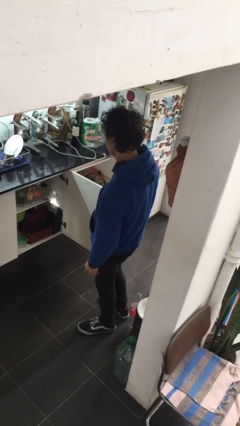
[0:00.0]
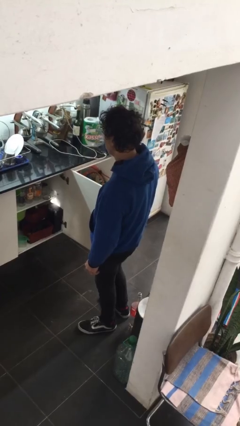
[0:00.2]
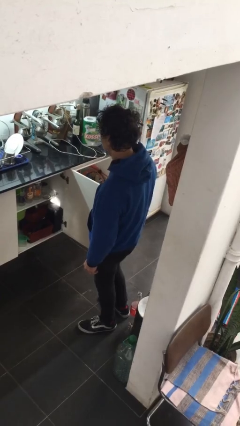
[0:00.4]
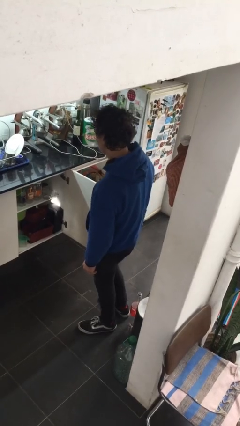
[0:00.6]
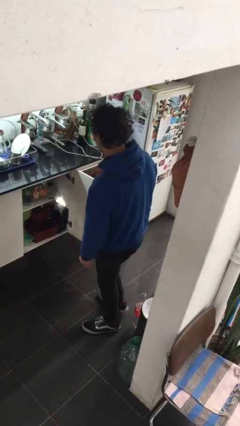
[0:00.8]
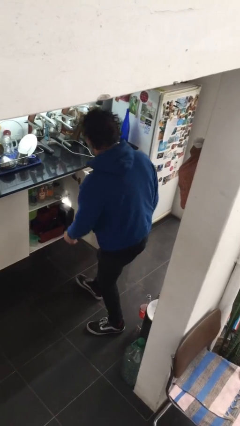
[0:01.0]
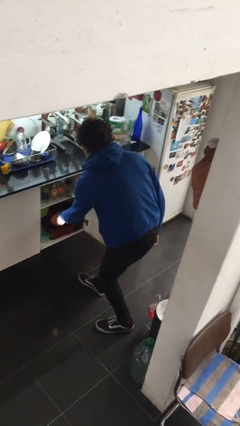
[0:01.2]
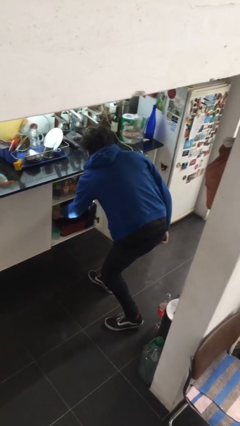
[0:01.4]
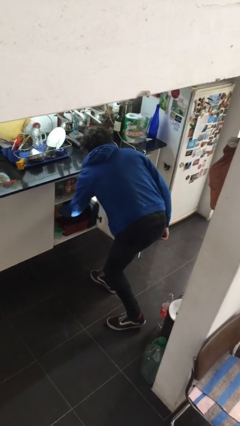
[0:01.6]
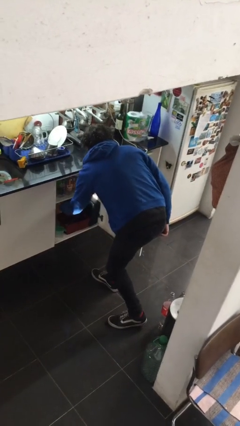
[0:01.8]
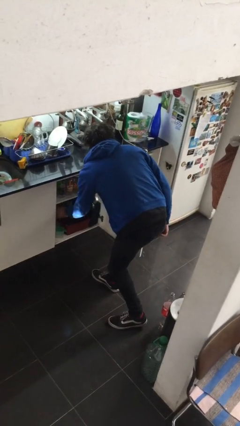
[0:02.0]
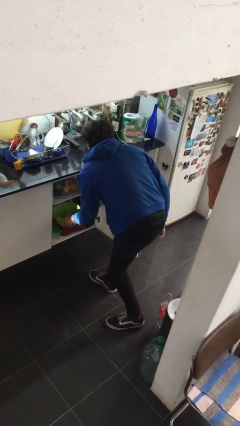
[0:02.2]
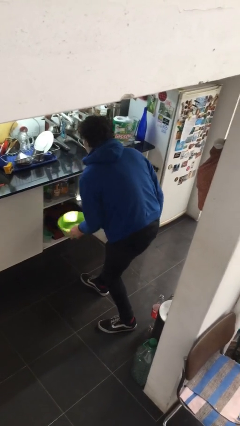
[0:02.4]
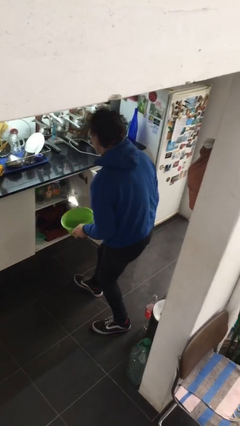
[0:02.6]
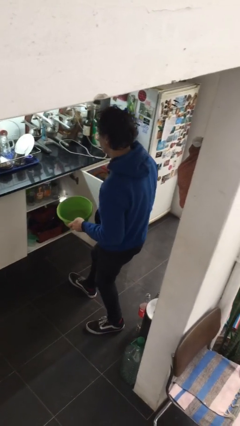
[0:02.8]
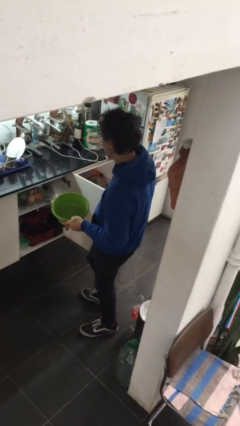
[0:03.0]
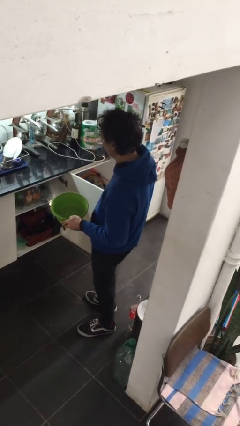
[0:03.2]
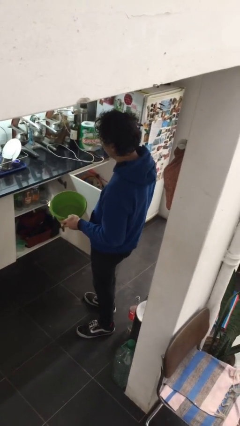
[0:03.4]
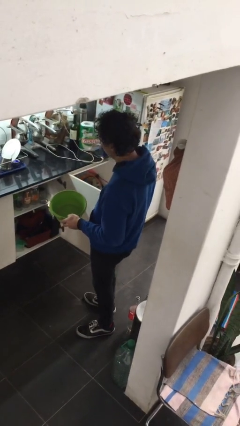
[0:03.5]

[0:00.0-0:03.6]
person picks up object from cabinet

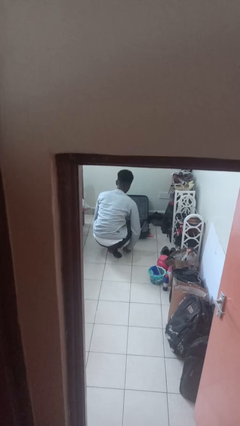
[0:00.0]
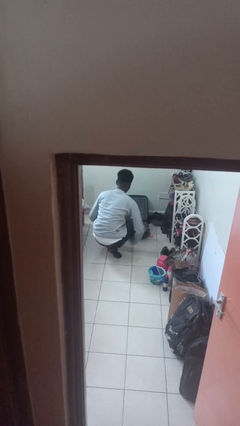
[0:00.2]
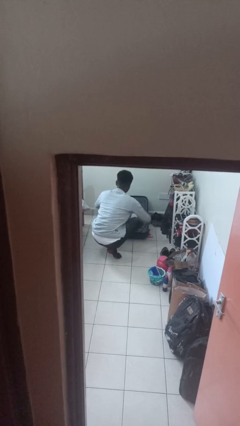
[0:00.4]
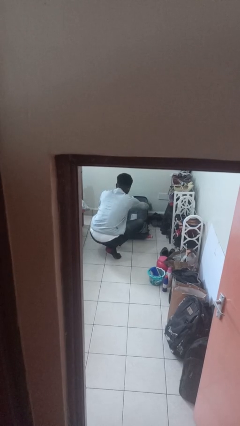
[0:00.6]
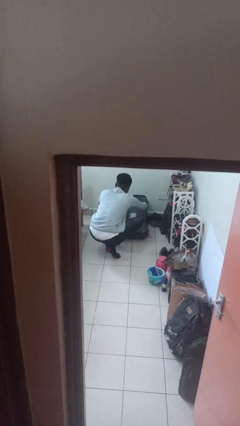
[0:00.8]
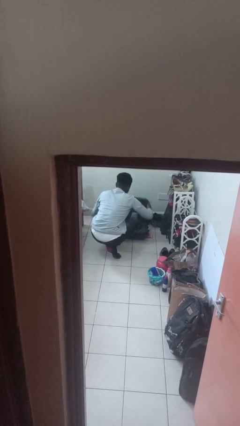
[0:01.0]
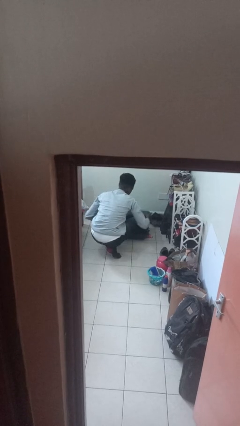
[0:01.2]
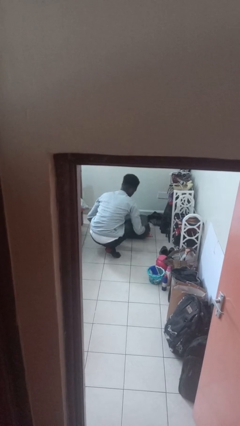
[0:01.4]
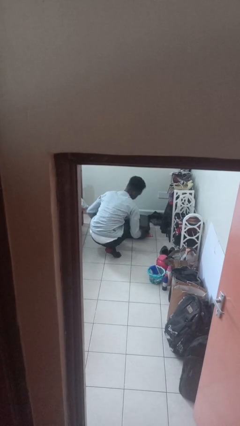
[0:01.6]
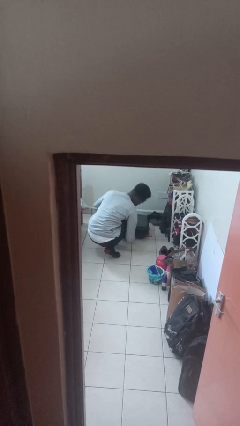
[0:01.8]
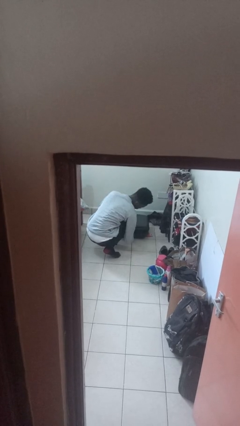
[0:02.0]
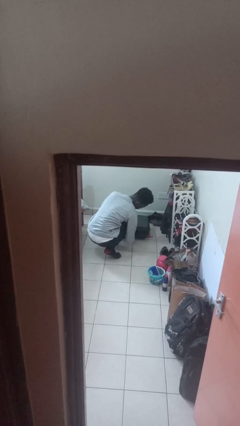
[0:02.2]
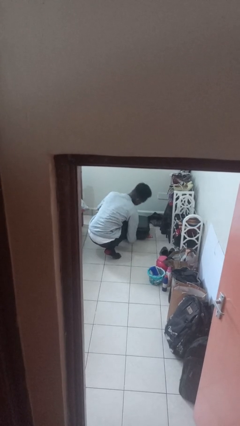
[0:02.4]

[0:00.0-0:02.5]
person closes suitcase

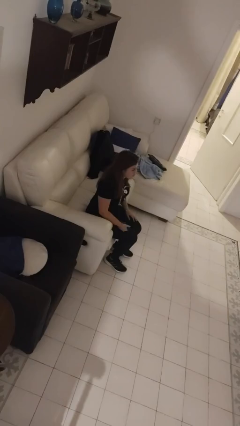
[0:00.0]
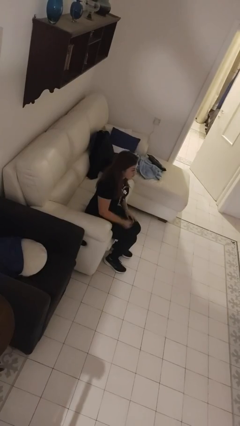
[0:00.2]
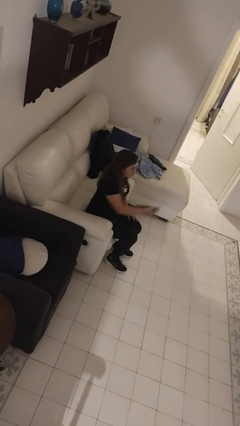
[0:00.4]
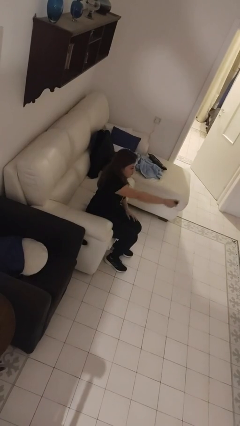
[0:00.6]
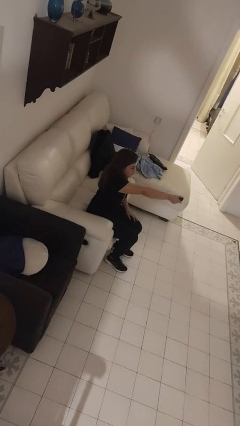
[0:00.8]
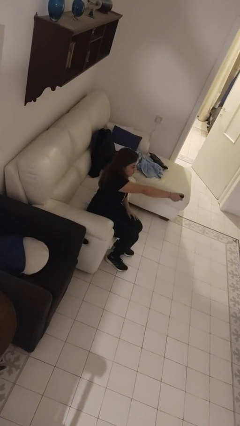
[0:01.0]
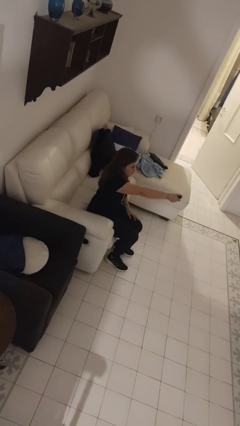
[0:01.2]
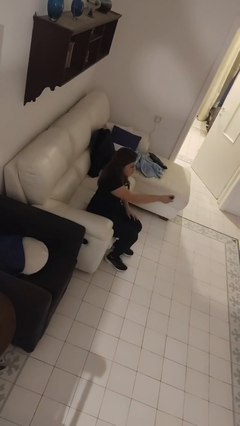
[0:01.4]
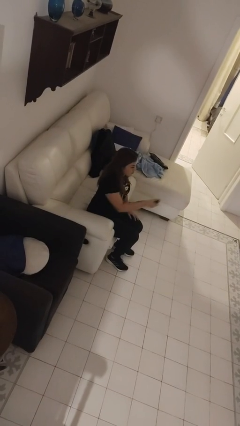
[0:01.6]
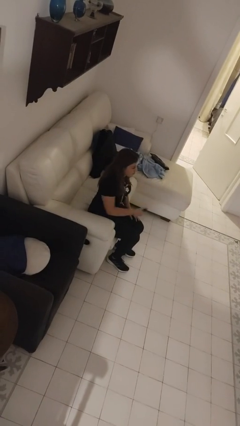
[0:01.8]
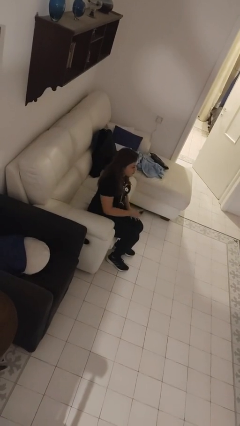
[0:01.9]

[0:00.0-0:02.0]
person uses television remote

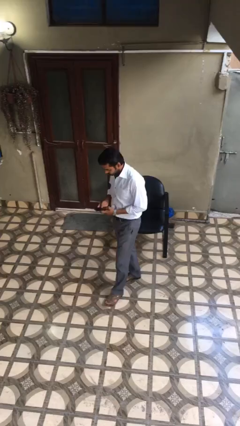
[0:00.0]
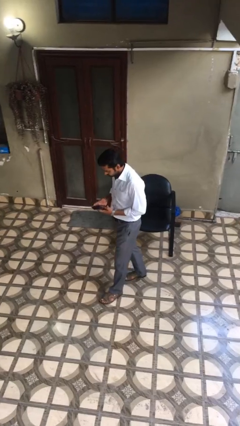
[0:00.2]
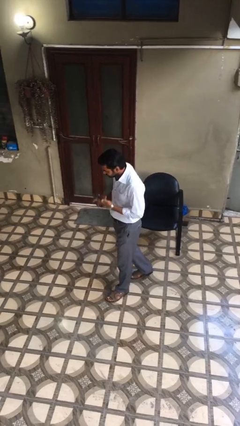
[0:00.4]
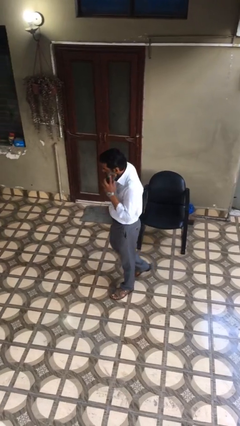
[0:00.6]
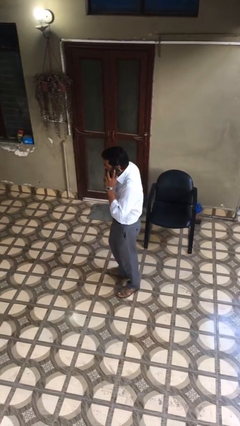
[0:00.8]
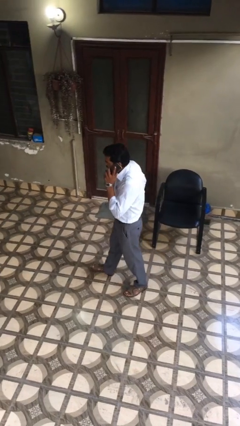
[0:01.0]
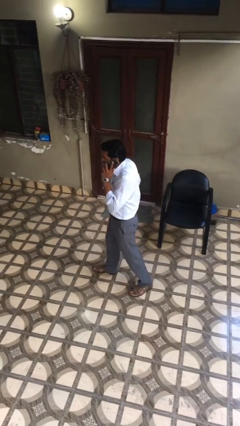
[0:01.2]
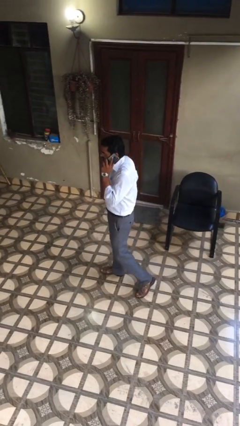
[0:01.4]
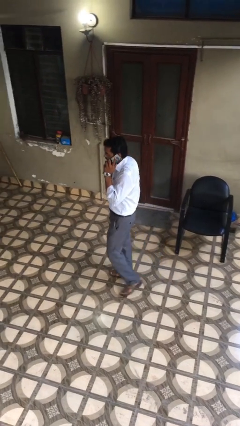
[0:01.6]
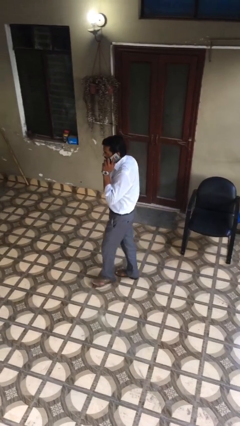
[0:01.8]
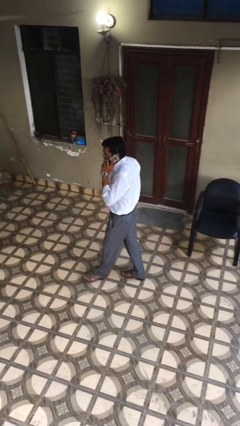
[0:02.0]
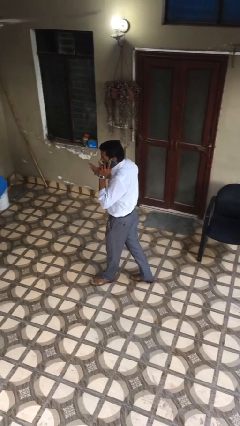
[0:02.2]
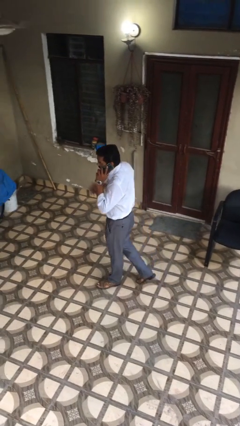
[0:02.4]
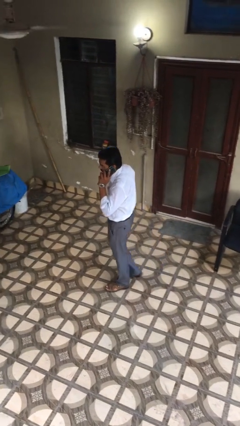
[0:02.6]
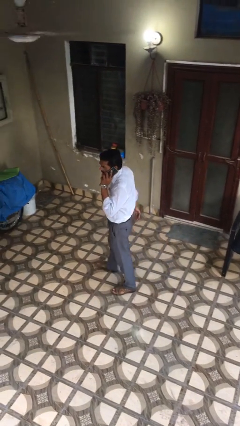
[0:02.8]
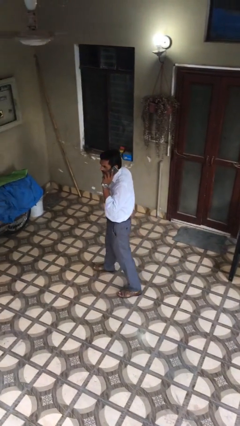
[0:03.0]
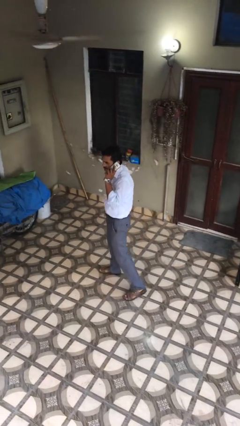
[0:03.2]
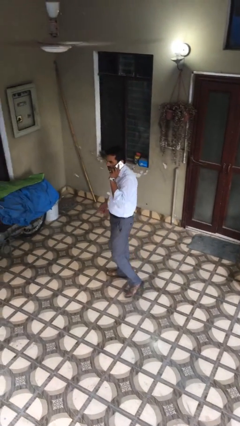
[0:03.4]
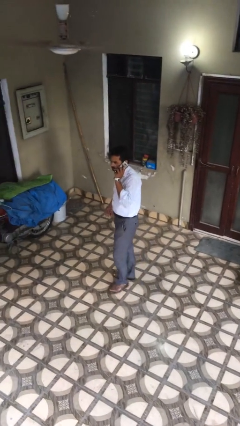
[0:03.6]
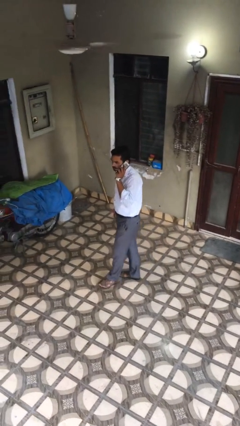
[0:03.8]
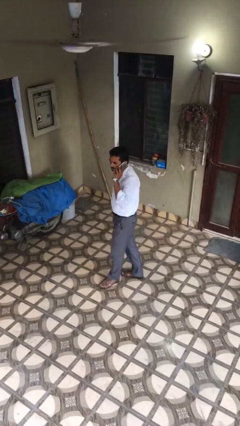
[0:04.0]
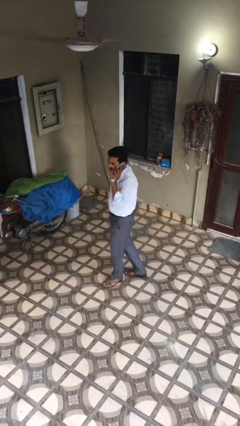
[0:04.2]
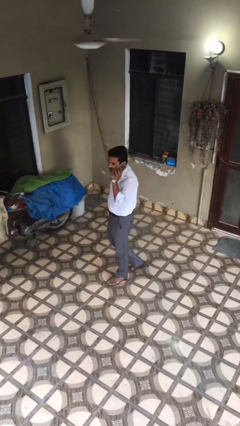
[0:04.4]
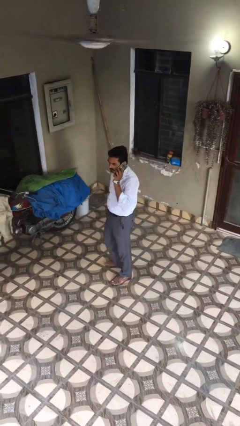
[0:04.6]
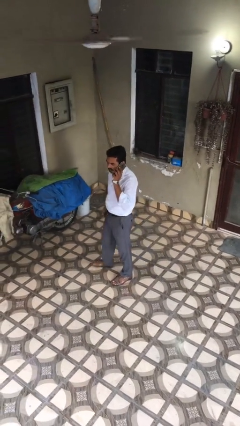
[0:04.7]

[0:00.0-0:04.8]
person talks on phone

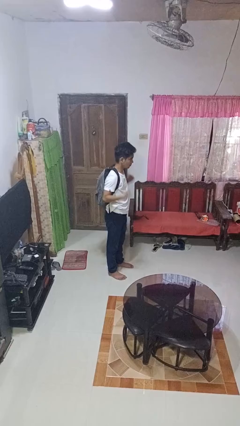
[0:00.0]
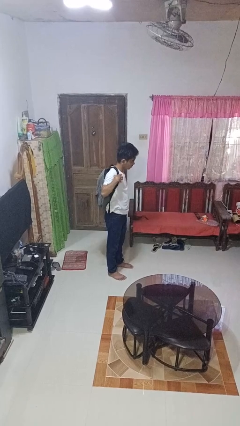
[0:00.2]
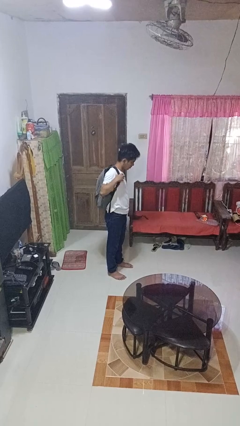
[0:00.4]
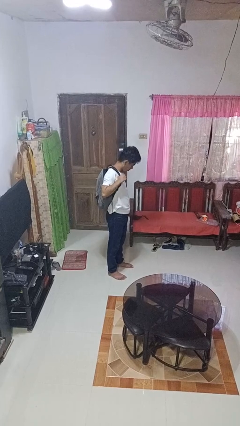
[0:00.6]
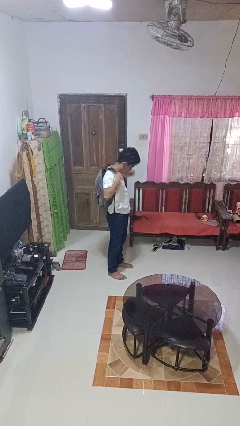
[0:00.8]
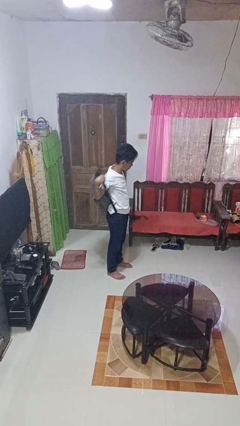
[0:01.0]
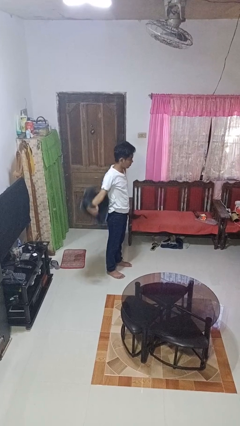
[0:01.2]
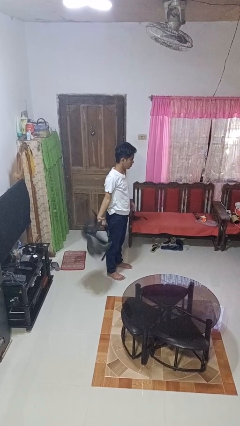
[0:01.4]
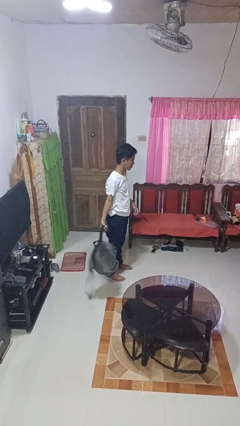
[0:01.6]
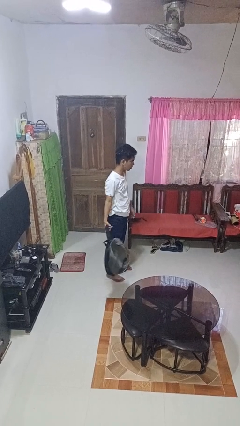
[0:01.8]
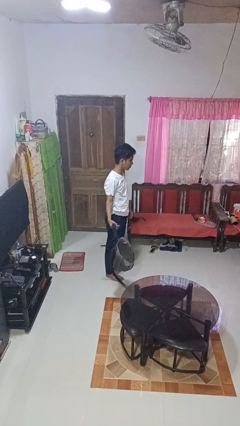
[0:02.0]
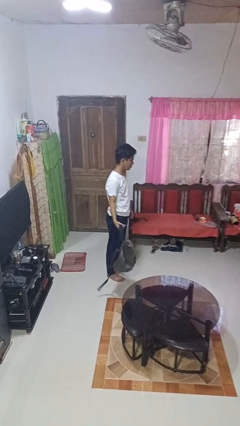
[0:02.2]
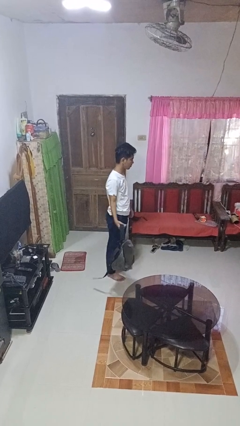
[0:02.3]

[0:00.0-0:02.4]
person takes off backpack

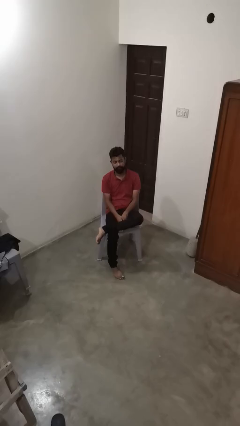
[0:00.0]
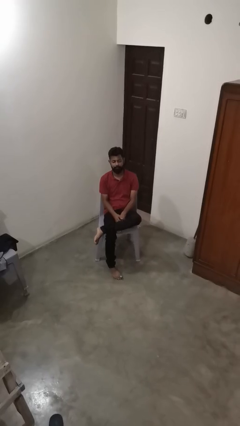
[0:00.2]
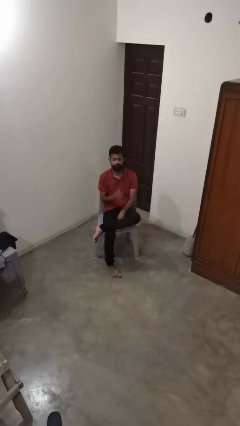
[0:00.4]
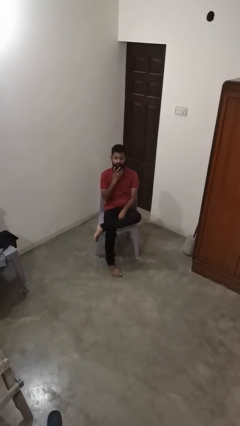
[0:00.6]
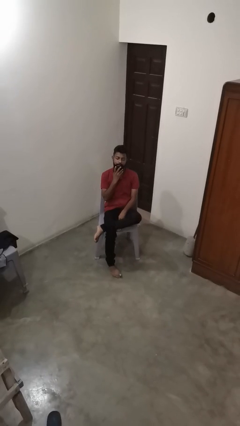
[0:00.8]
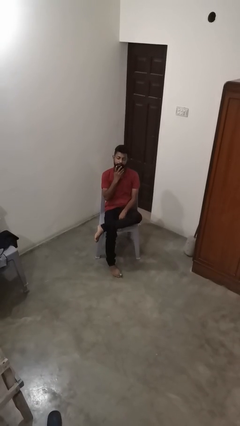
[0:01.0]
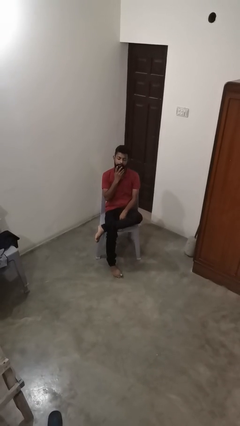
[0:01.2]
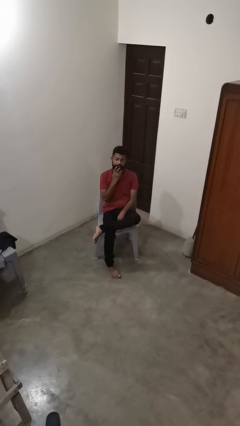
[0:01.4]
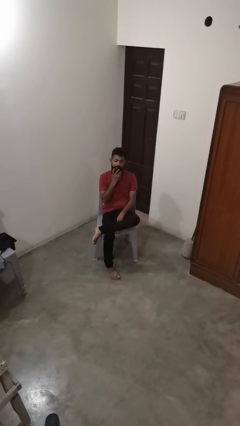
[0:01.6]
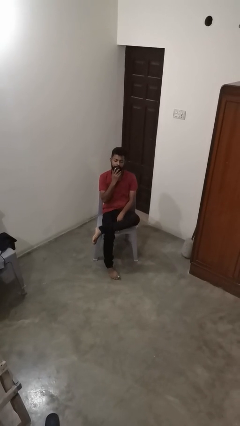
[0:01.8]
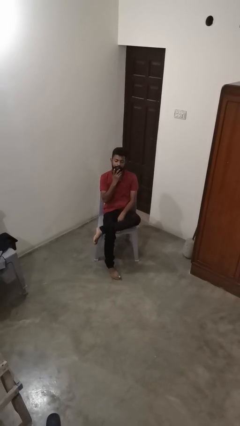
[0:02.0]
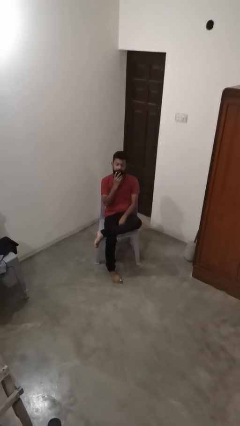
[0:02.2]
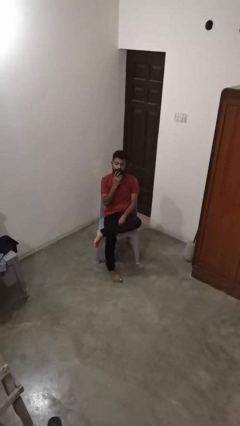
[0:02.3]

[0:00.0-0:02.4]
person strokes chin
